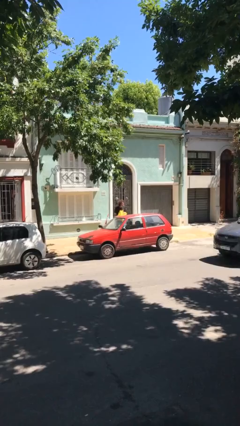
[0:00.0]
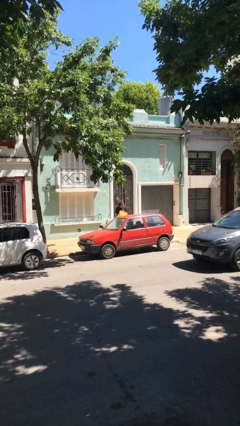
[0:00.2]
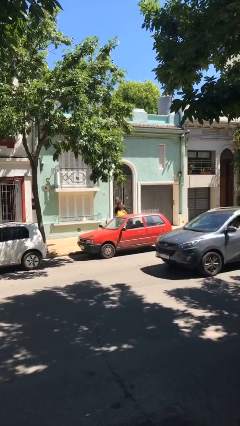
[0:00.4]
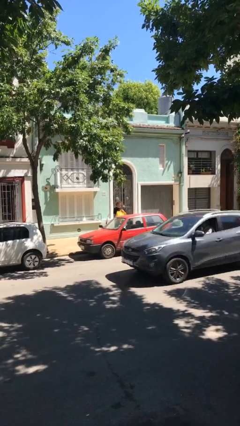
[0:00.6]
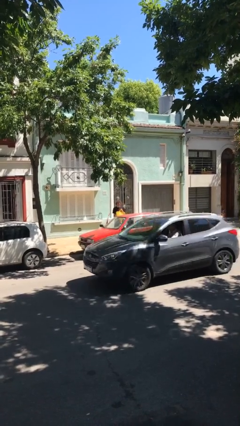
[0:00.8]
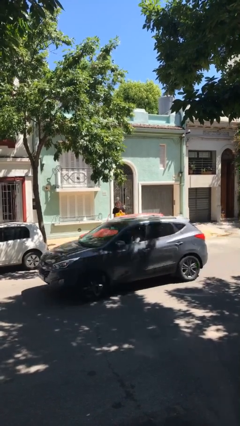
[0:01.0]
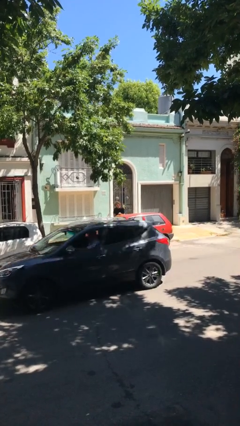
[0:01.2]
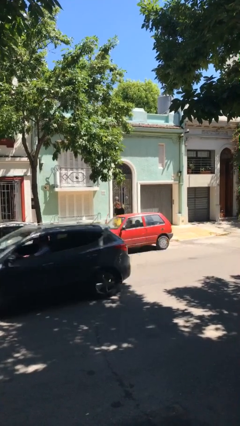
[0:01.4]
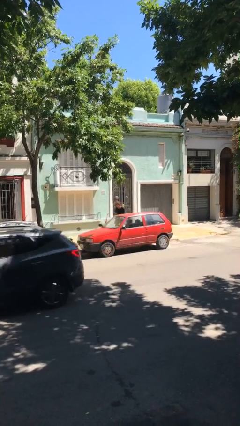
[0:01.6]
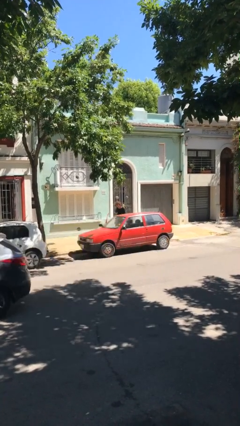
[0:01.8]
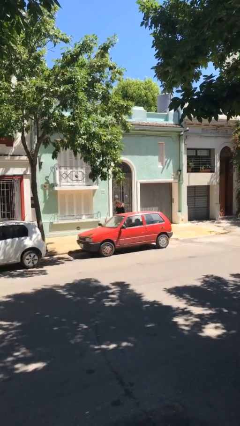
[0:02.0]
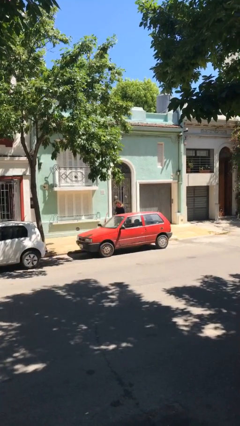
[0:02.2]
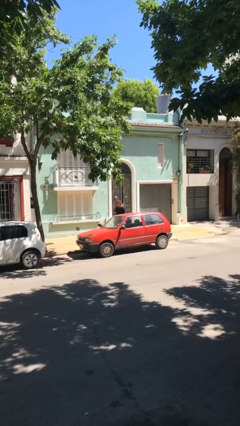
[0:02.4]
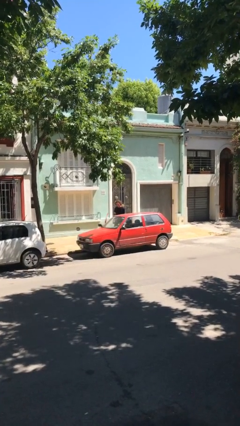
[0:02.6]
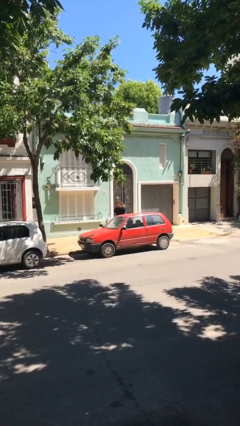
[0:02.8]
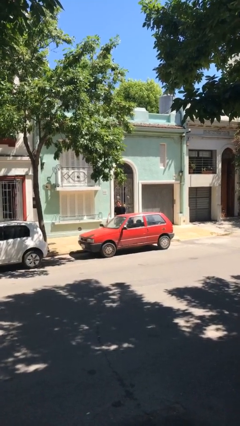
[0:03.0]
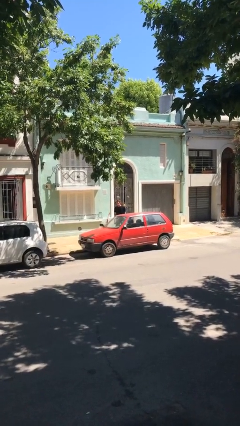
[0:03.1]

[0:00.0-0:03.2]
person loads car

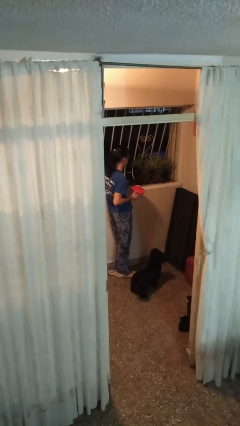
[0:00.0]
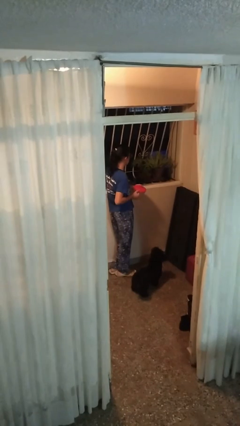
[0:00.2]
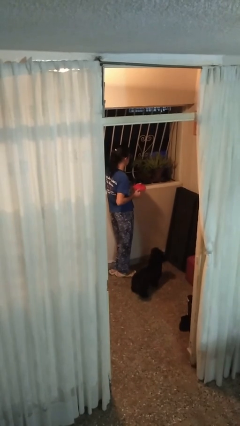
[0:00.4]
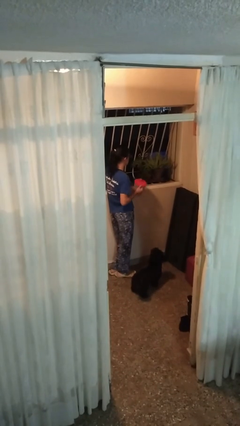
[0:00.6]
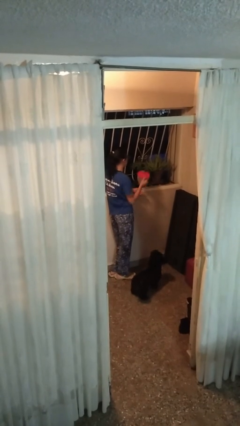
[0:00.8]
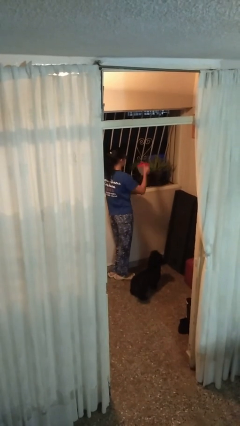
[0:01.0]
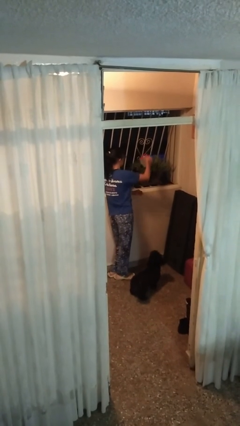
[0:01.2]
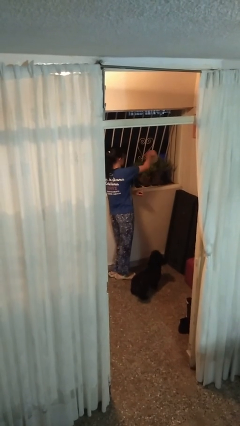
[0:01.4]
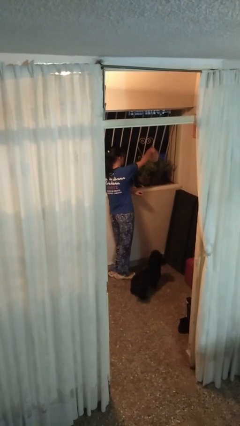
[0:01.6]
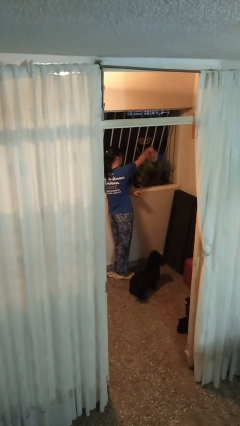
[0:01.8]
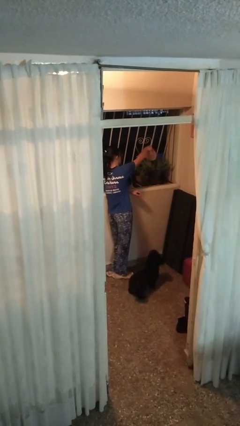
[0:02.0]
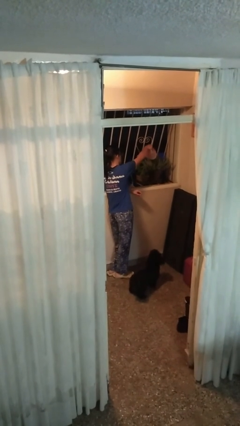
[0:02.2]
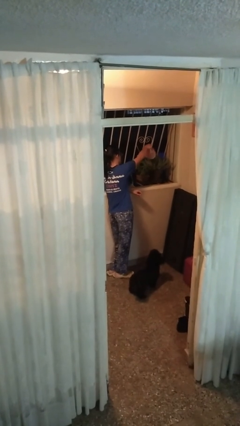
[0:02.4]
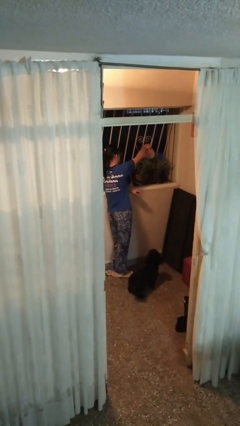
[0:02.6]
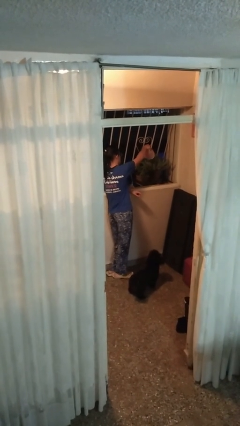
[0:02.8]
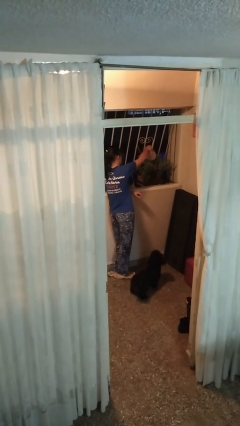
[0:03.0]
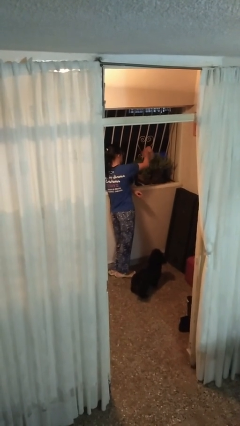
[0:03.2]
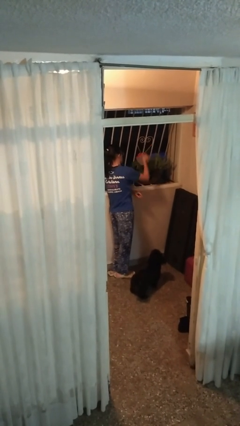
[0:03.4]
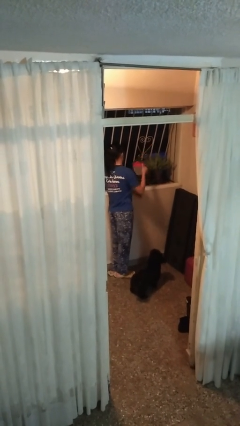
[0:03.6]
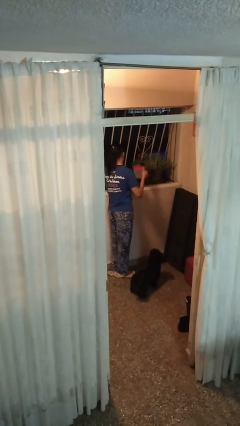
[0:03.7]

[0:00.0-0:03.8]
person waters houseplant

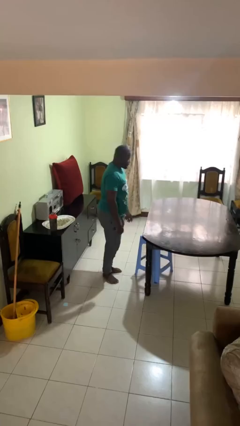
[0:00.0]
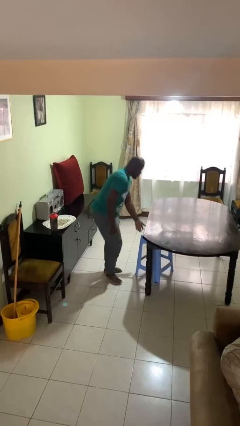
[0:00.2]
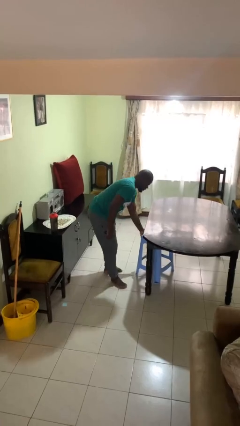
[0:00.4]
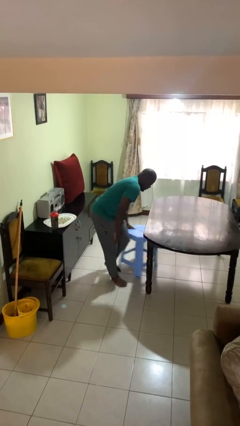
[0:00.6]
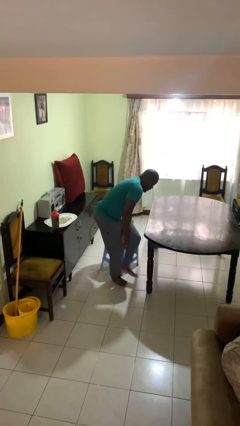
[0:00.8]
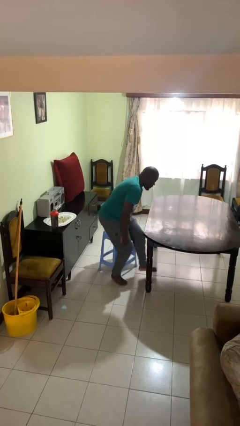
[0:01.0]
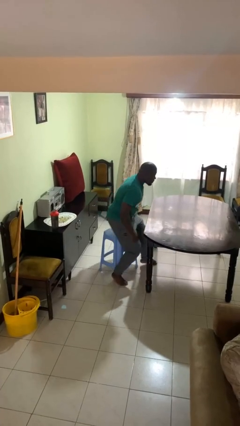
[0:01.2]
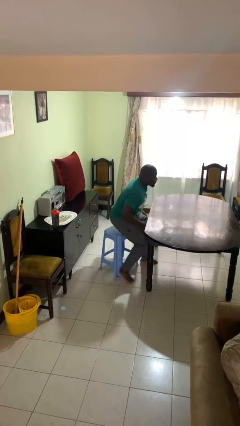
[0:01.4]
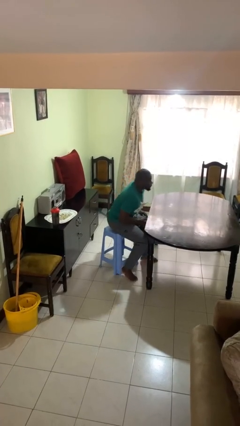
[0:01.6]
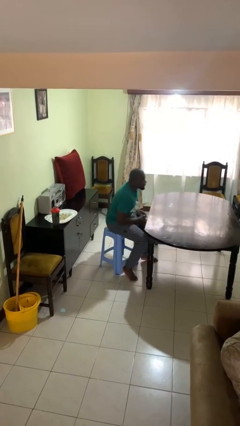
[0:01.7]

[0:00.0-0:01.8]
person sits down

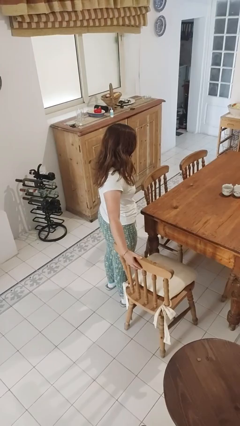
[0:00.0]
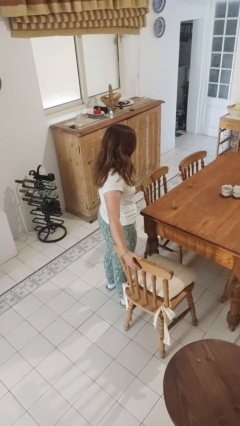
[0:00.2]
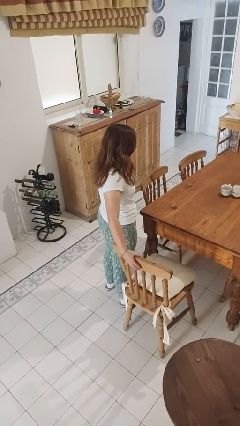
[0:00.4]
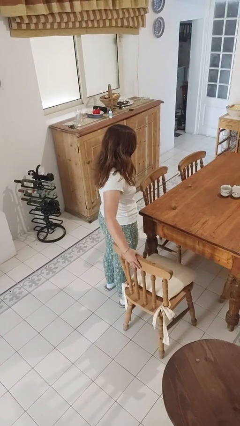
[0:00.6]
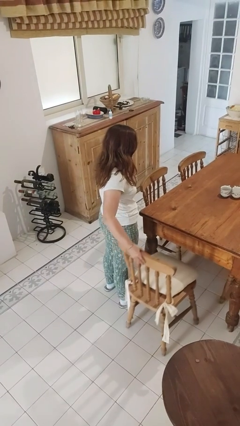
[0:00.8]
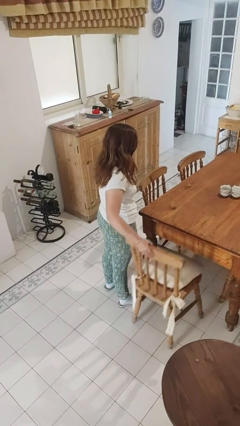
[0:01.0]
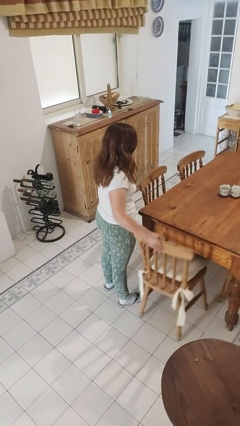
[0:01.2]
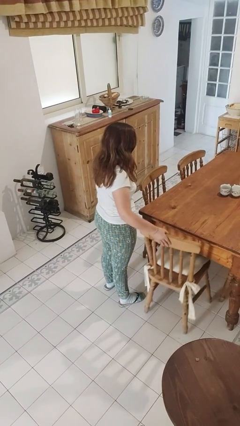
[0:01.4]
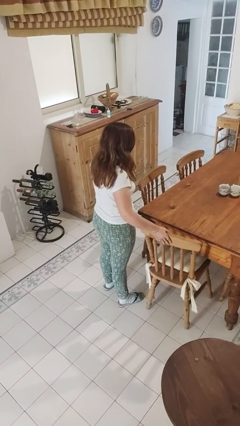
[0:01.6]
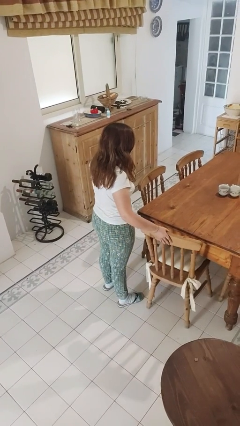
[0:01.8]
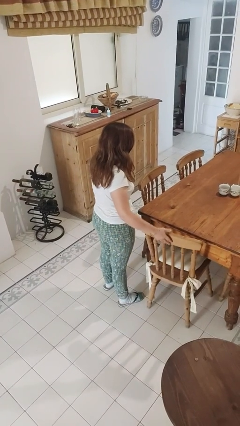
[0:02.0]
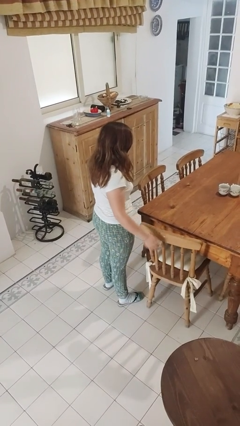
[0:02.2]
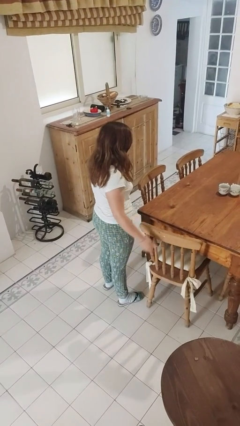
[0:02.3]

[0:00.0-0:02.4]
person pushes in chair

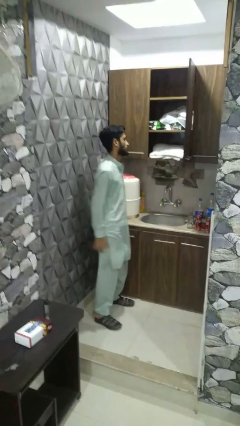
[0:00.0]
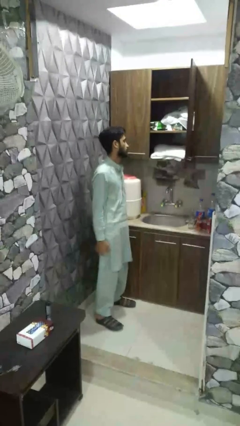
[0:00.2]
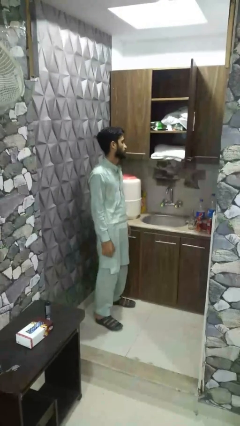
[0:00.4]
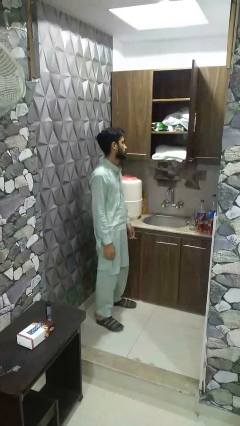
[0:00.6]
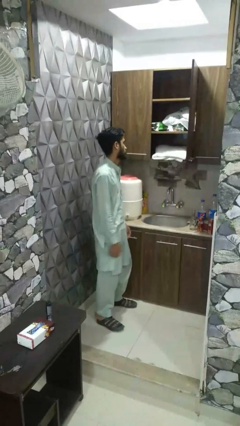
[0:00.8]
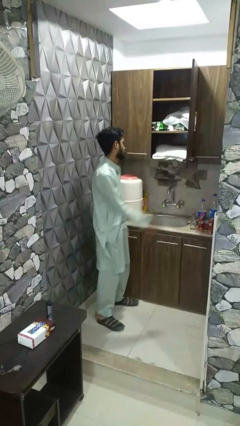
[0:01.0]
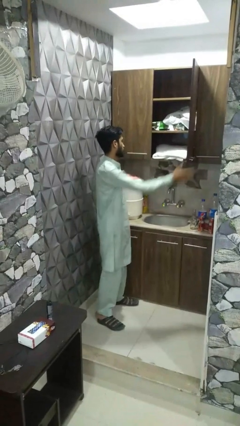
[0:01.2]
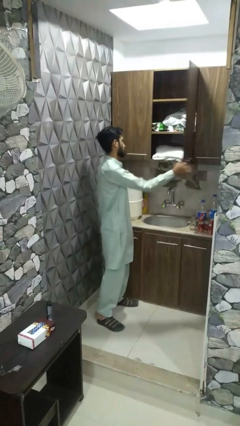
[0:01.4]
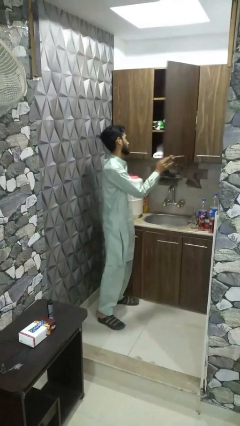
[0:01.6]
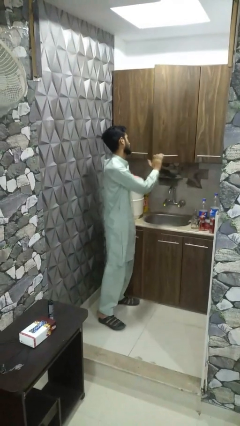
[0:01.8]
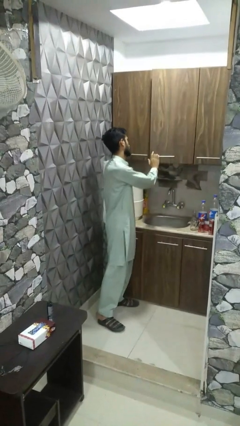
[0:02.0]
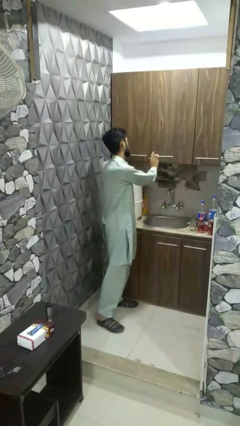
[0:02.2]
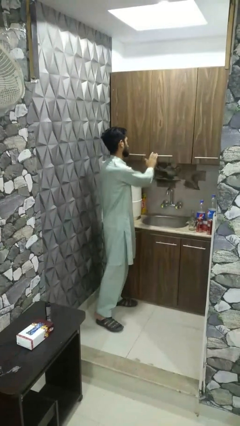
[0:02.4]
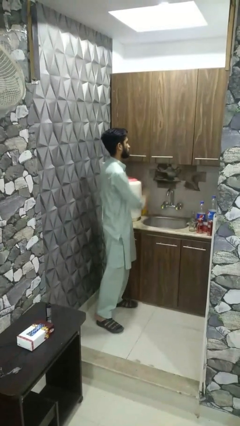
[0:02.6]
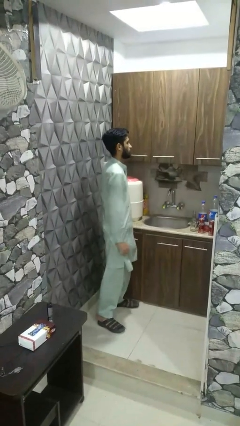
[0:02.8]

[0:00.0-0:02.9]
person closes dresser drawer

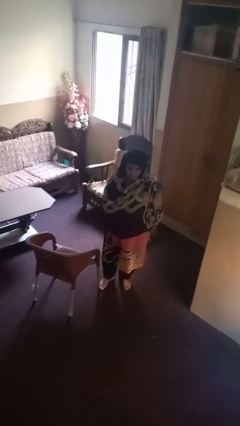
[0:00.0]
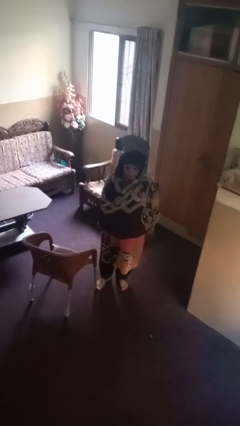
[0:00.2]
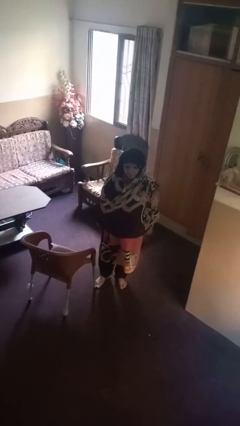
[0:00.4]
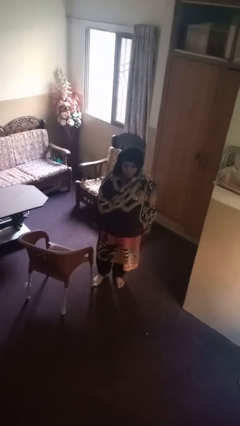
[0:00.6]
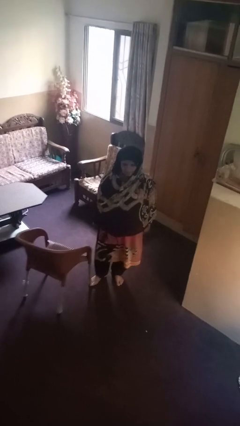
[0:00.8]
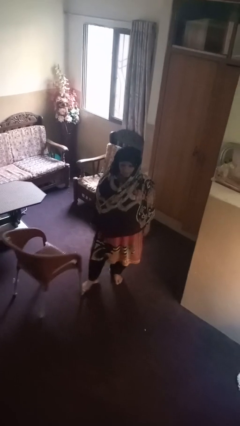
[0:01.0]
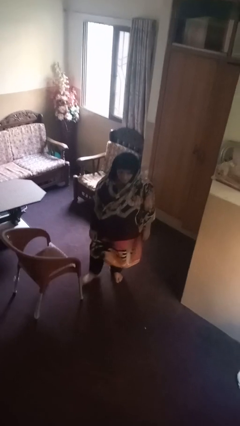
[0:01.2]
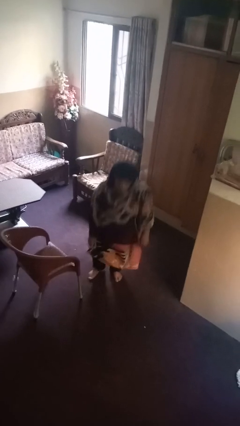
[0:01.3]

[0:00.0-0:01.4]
person trips on object on floor

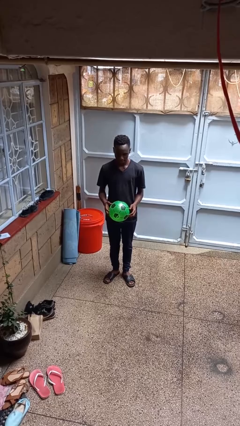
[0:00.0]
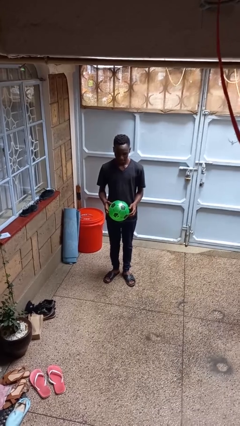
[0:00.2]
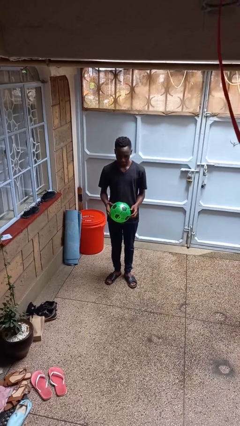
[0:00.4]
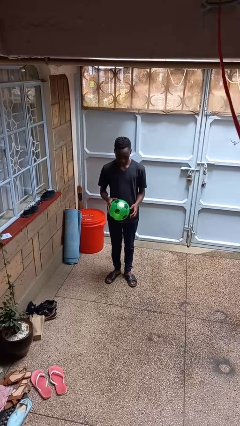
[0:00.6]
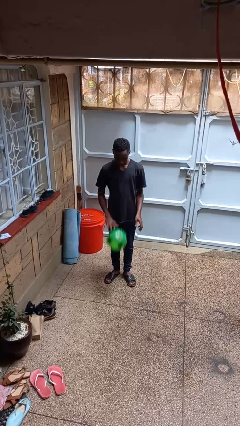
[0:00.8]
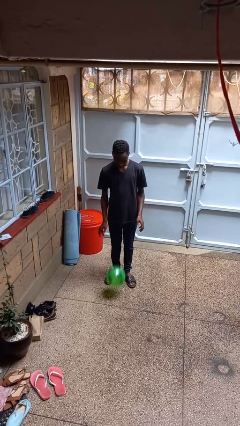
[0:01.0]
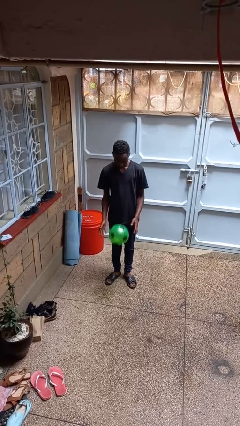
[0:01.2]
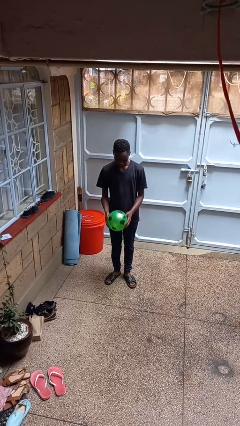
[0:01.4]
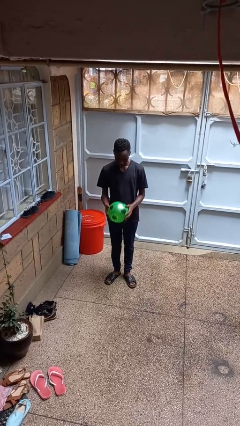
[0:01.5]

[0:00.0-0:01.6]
person bounces ball on floor

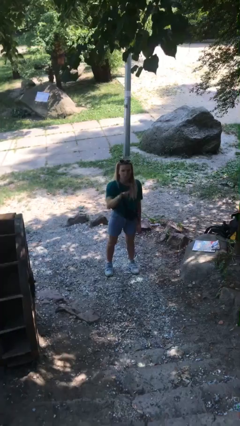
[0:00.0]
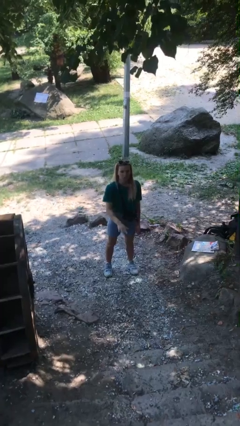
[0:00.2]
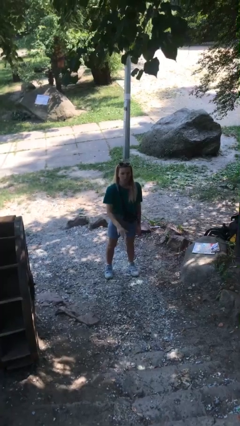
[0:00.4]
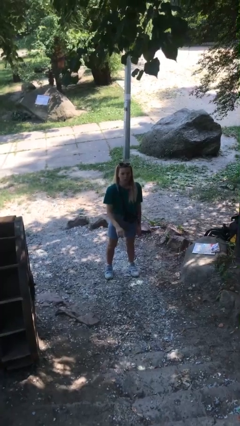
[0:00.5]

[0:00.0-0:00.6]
person gestures swipe down
